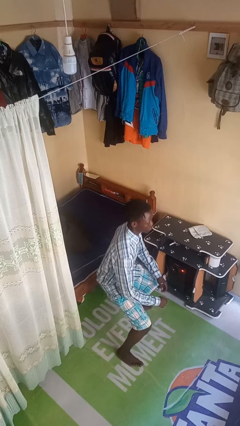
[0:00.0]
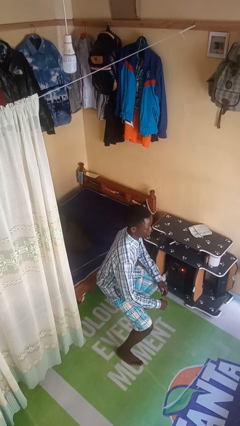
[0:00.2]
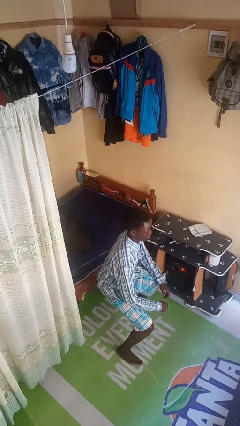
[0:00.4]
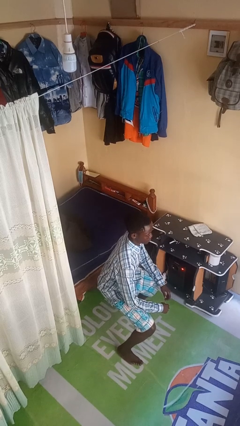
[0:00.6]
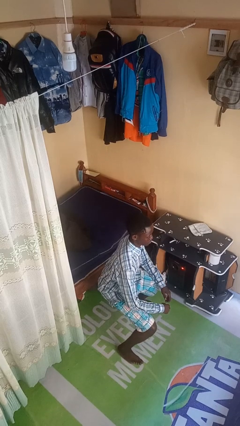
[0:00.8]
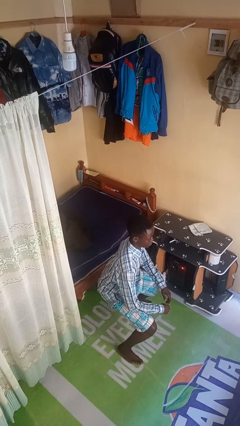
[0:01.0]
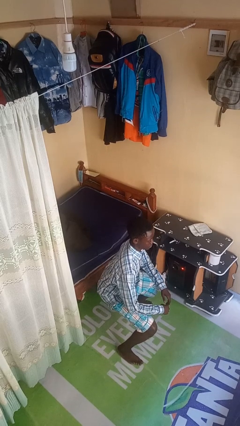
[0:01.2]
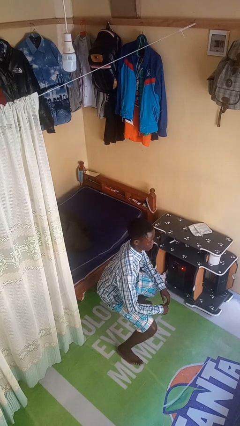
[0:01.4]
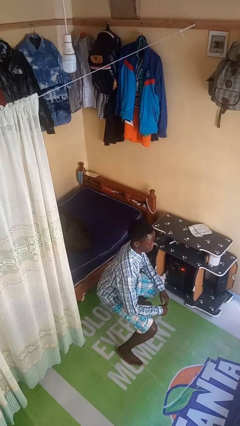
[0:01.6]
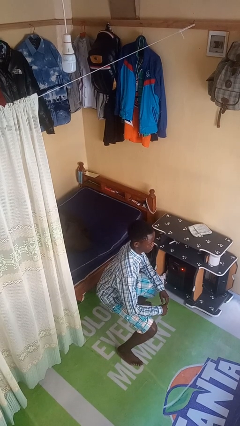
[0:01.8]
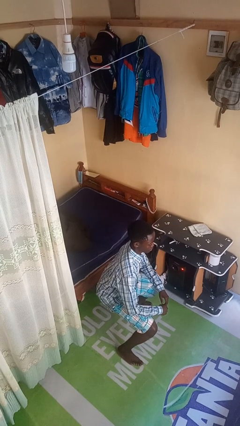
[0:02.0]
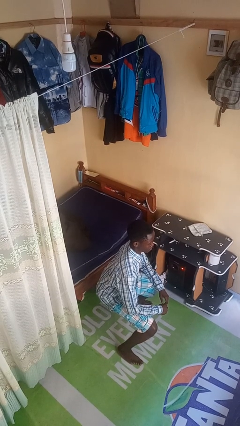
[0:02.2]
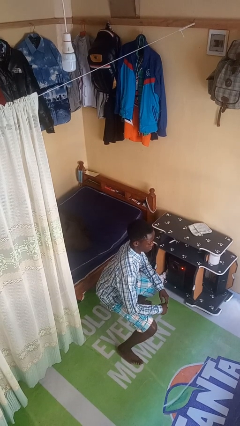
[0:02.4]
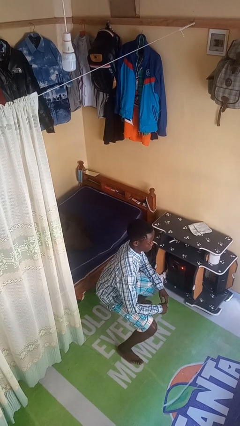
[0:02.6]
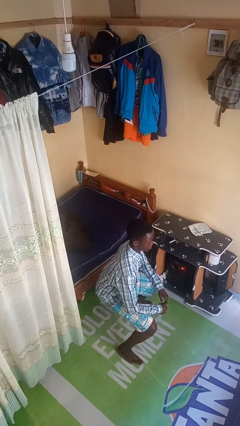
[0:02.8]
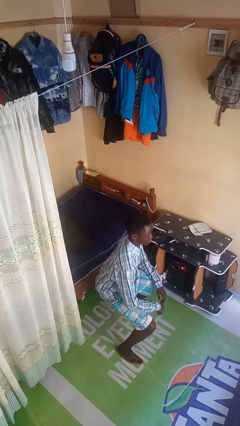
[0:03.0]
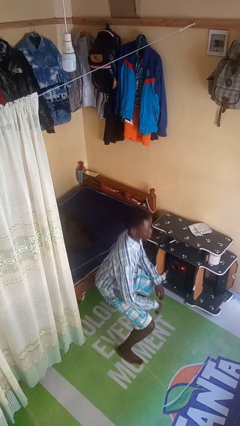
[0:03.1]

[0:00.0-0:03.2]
person squats

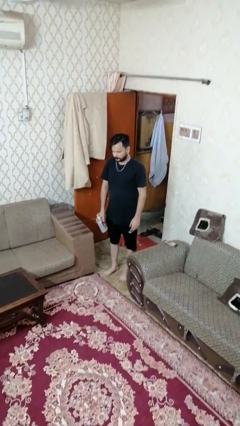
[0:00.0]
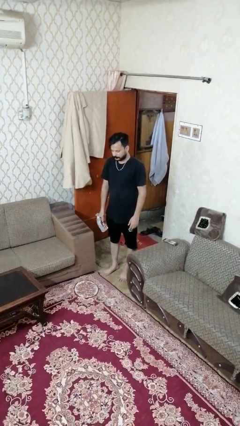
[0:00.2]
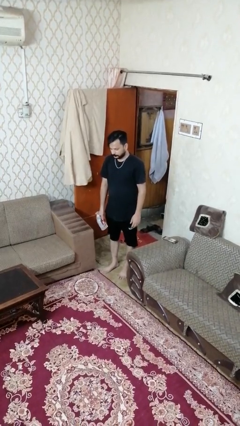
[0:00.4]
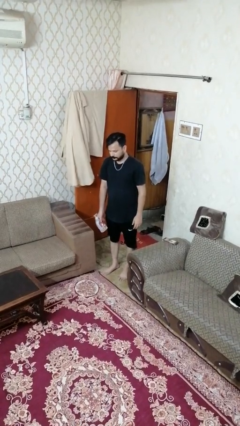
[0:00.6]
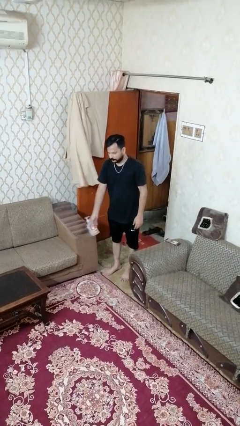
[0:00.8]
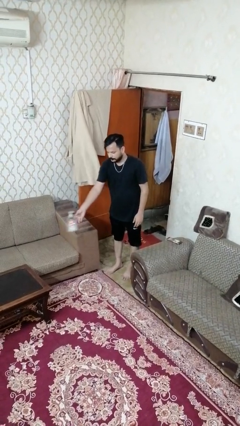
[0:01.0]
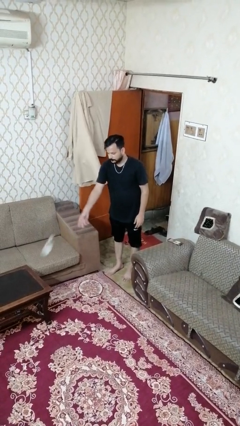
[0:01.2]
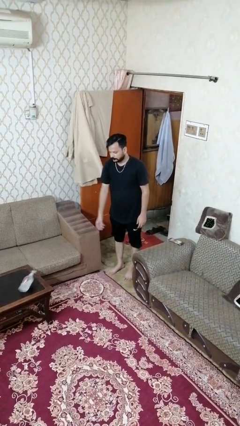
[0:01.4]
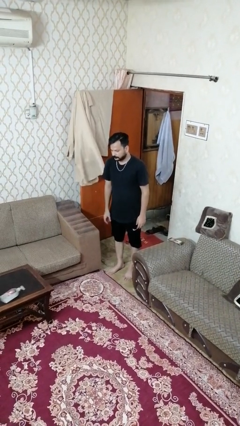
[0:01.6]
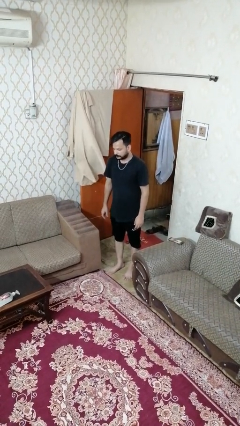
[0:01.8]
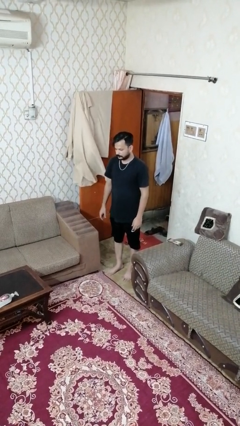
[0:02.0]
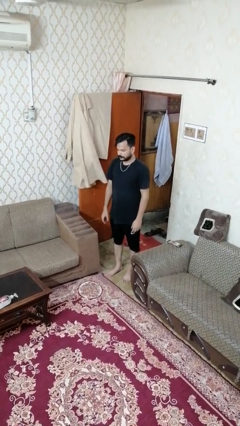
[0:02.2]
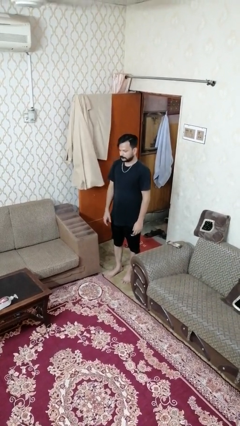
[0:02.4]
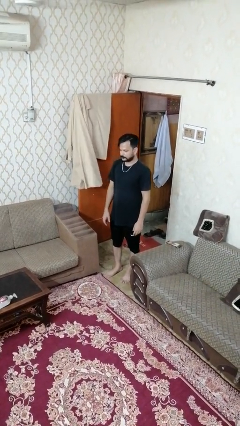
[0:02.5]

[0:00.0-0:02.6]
person throws object on table

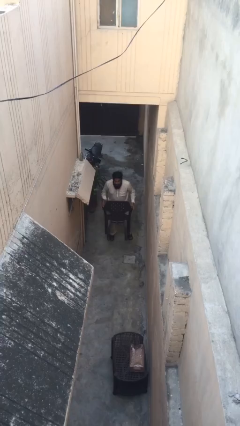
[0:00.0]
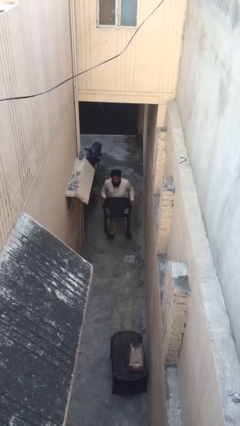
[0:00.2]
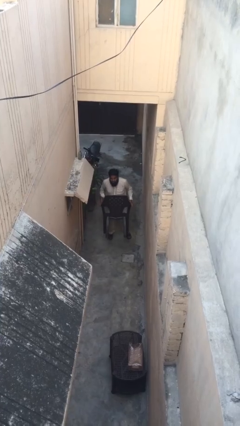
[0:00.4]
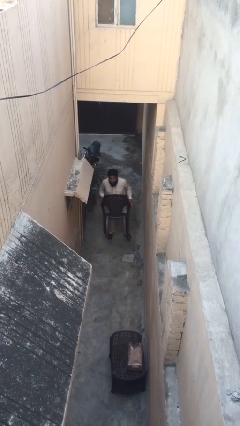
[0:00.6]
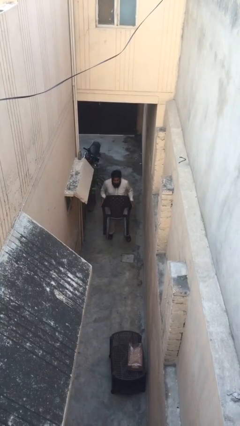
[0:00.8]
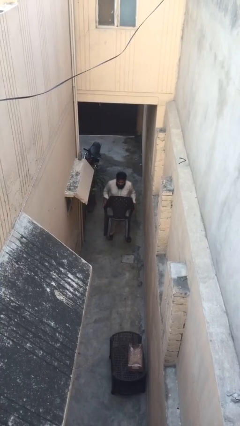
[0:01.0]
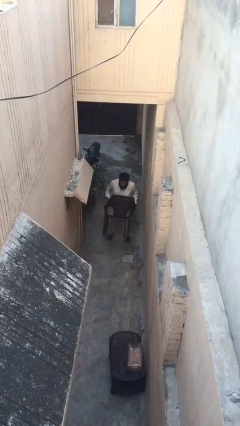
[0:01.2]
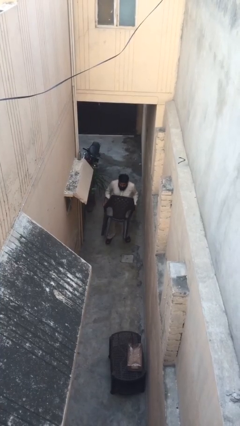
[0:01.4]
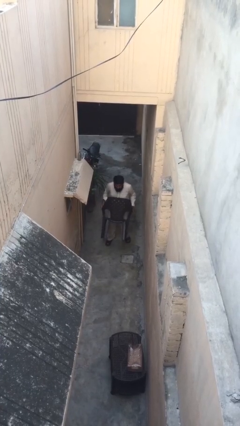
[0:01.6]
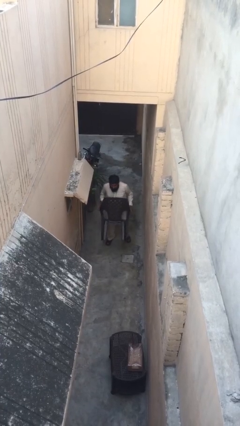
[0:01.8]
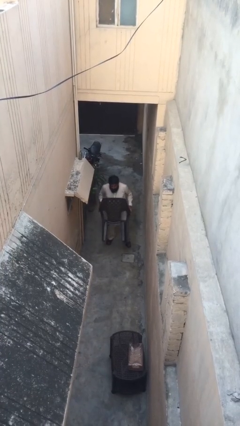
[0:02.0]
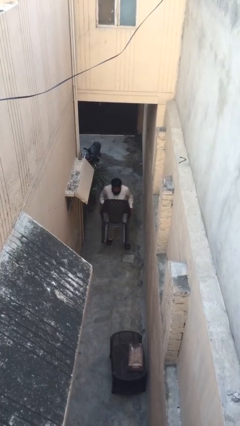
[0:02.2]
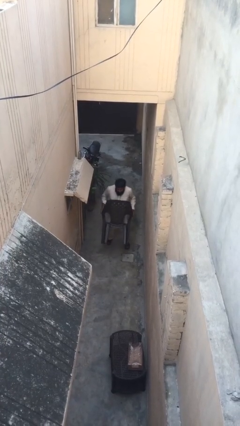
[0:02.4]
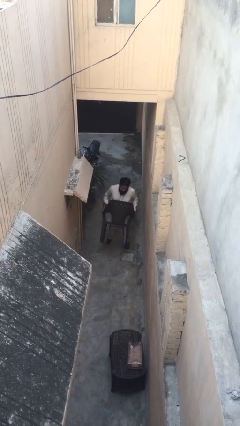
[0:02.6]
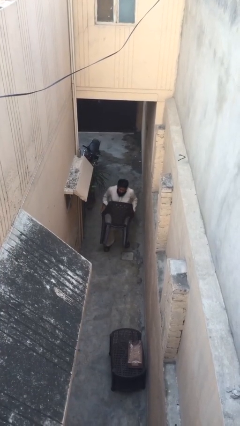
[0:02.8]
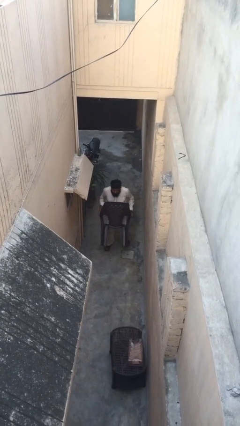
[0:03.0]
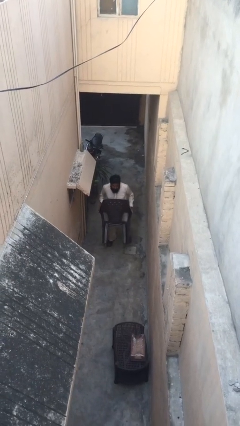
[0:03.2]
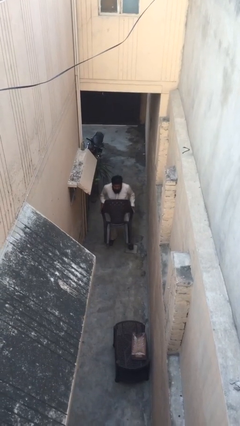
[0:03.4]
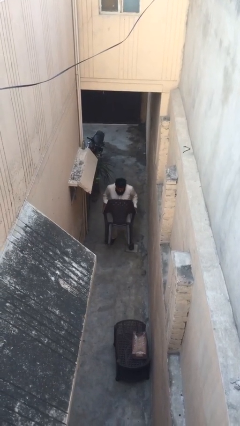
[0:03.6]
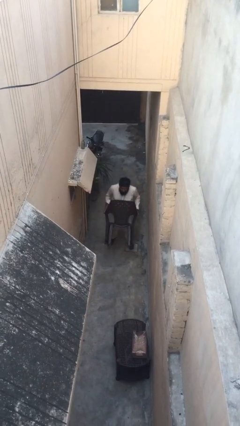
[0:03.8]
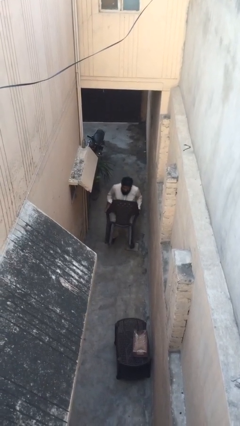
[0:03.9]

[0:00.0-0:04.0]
person carries heavy object

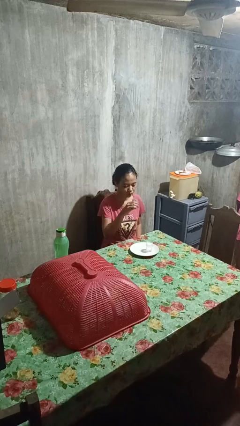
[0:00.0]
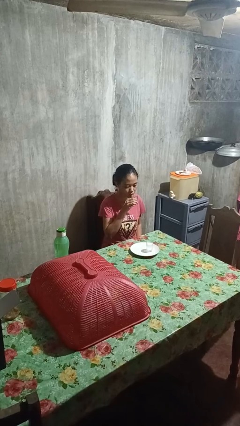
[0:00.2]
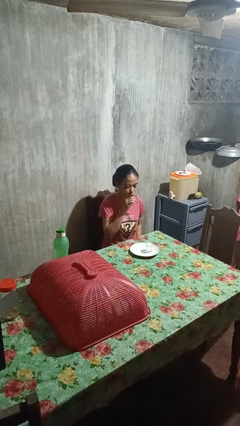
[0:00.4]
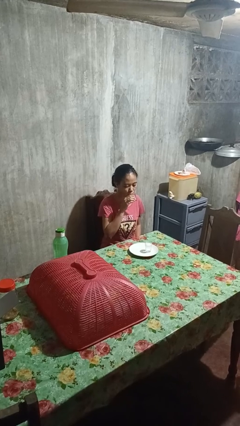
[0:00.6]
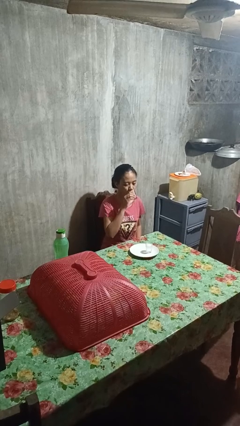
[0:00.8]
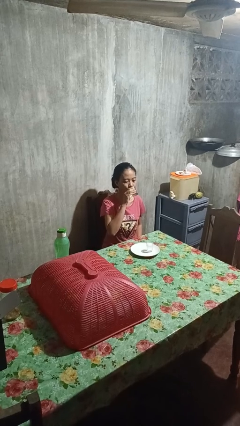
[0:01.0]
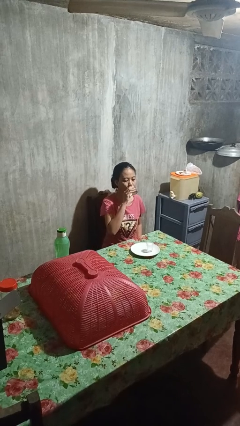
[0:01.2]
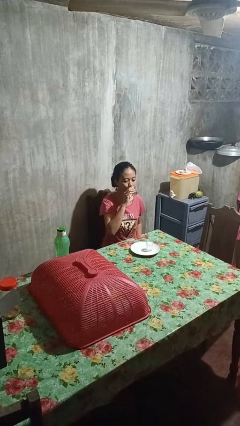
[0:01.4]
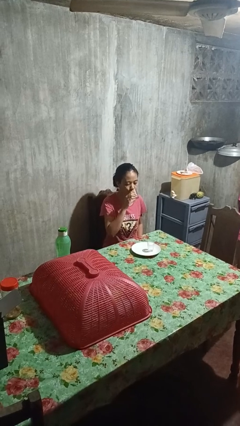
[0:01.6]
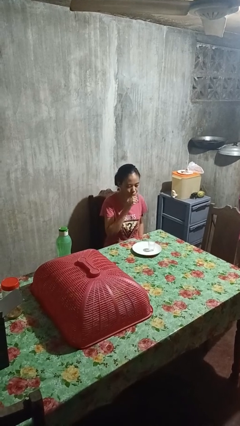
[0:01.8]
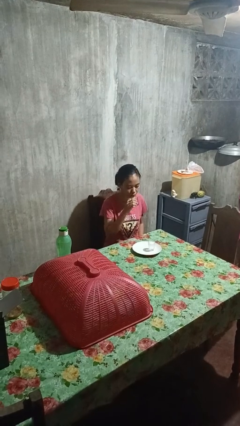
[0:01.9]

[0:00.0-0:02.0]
person drinks from shotglass

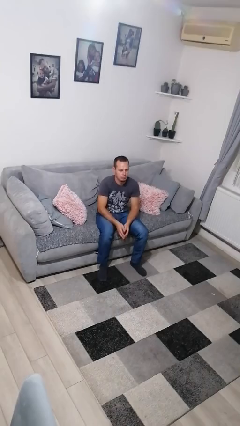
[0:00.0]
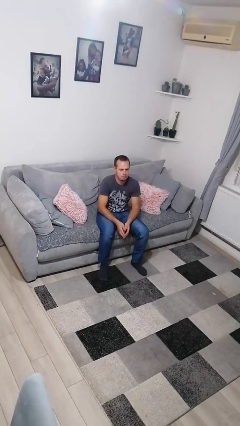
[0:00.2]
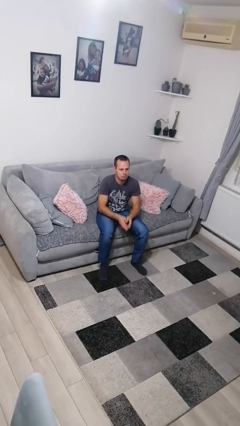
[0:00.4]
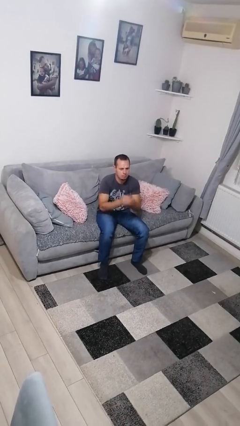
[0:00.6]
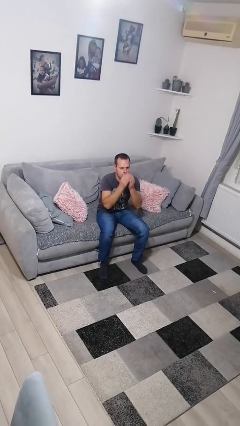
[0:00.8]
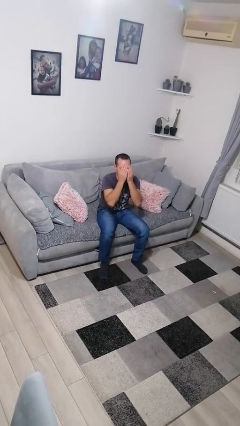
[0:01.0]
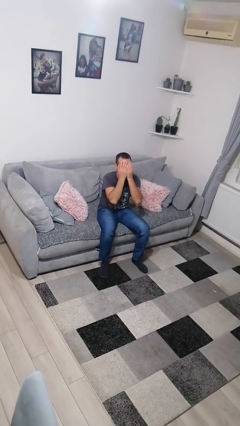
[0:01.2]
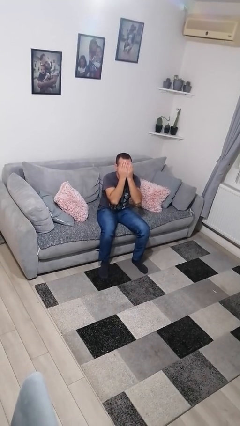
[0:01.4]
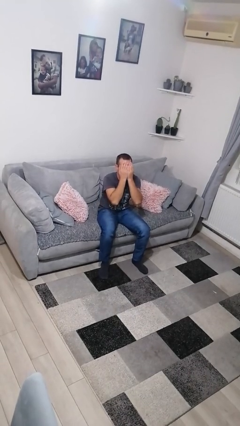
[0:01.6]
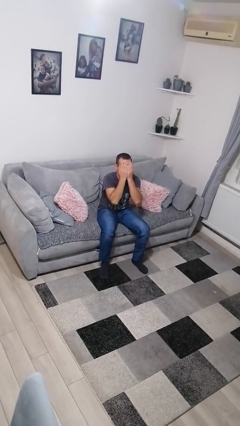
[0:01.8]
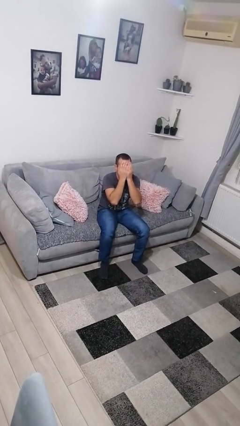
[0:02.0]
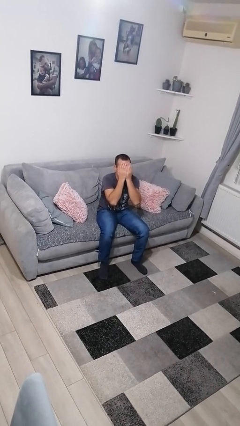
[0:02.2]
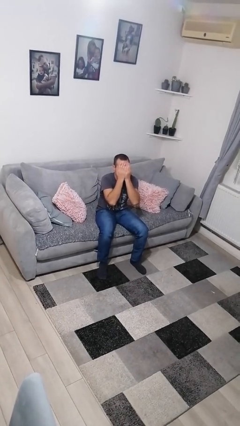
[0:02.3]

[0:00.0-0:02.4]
person covers face with hands

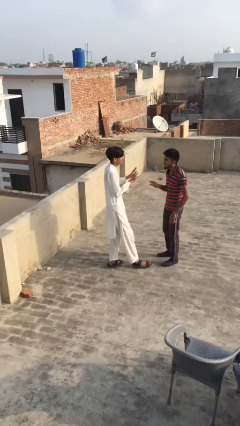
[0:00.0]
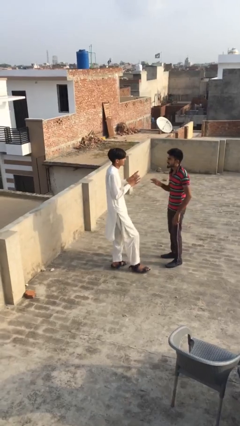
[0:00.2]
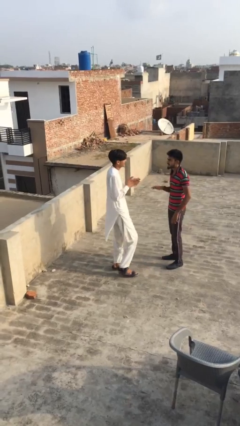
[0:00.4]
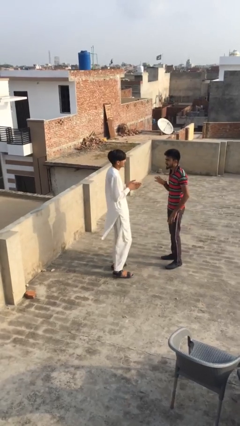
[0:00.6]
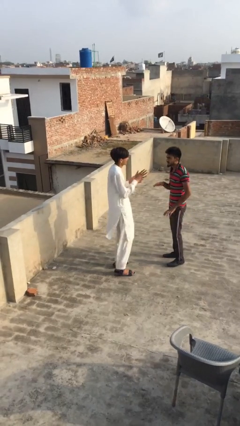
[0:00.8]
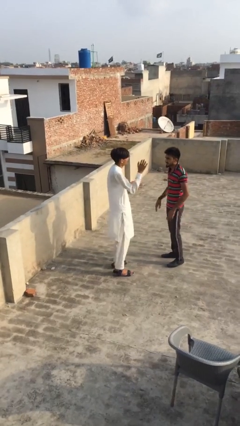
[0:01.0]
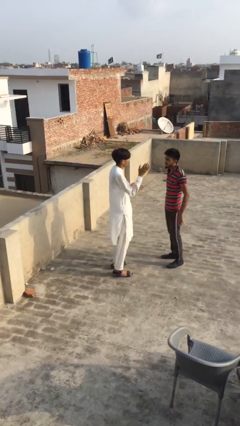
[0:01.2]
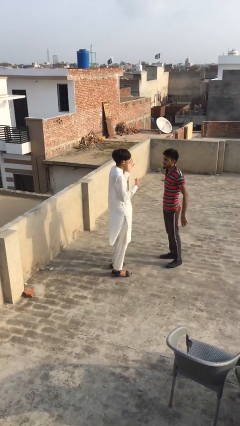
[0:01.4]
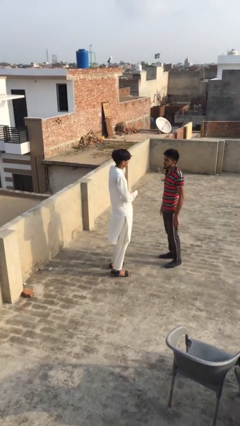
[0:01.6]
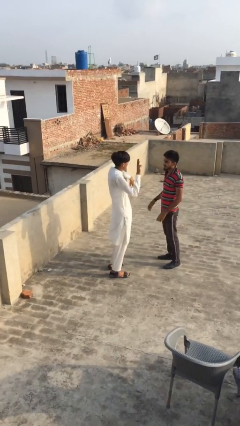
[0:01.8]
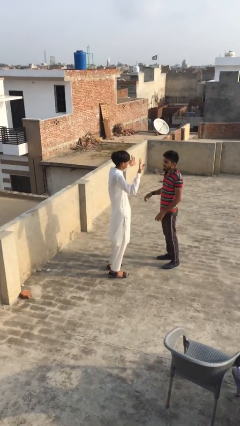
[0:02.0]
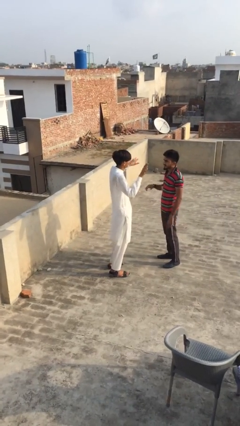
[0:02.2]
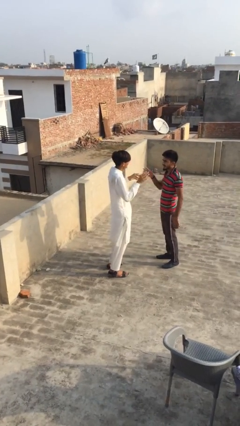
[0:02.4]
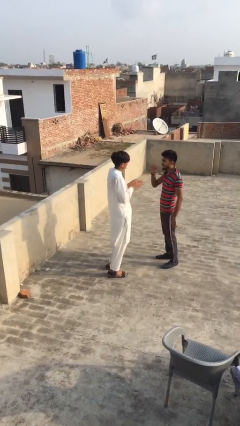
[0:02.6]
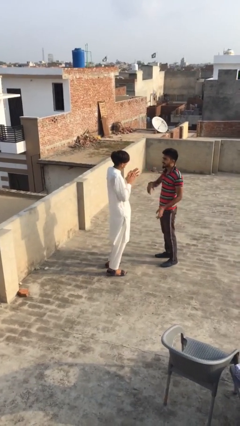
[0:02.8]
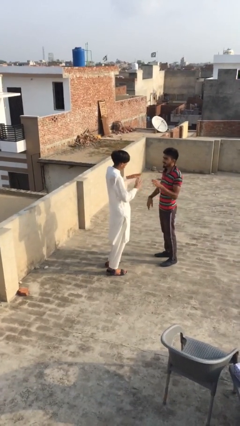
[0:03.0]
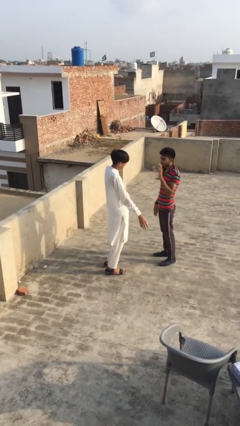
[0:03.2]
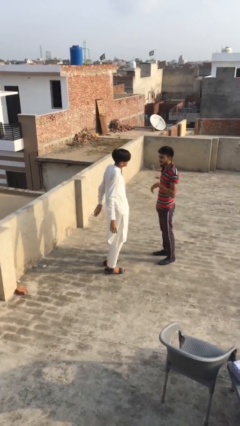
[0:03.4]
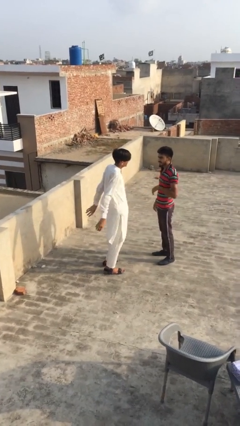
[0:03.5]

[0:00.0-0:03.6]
person talks to person
